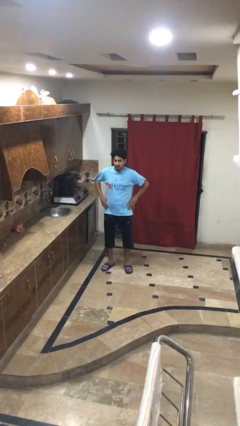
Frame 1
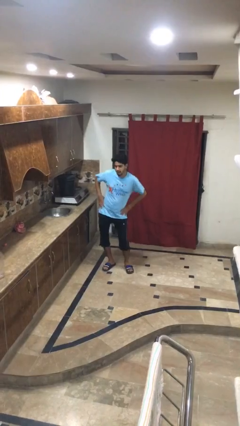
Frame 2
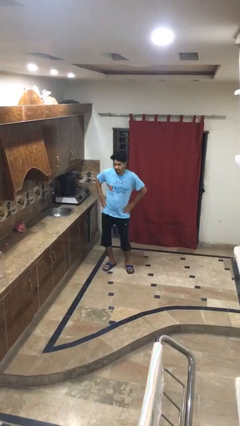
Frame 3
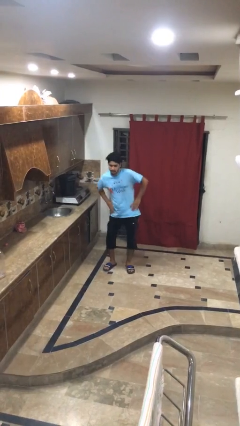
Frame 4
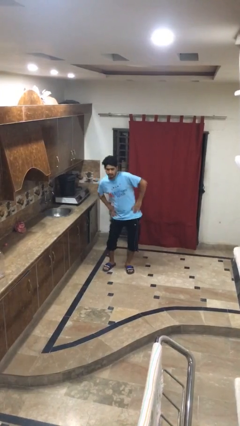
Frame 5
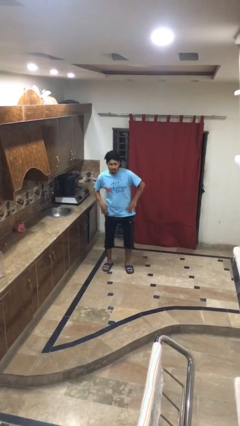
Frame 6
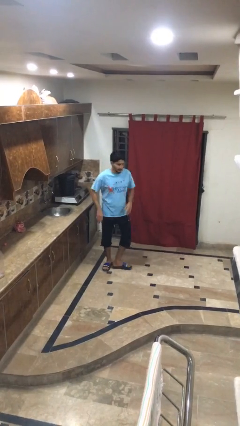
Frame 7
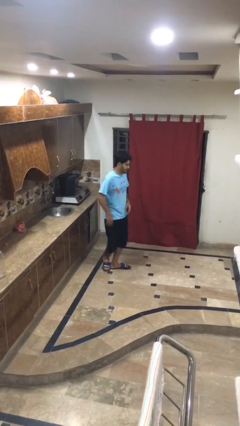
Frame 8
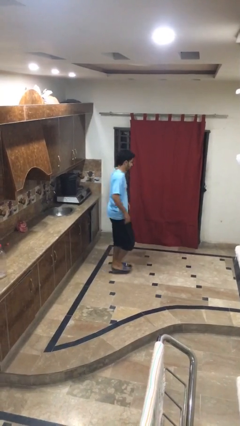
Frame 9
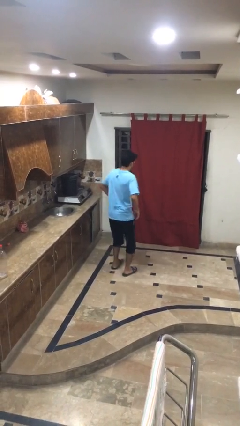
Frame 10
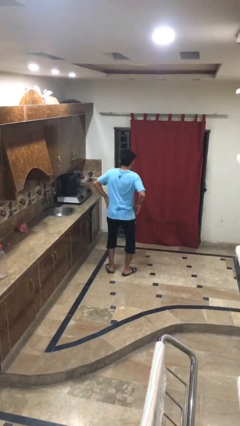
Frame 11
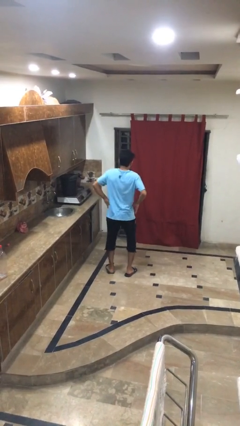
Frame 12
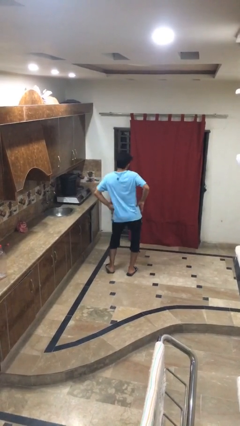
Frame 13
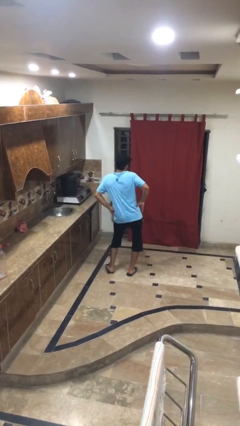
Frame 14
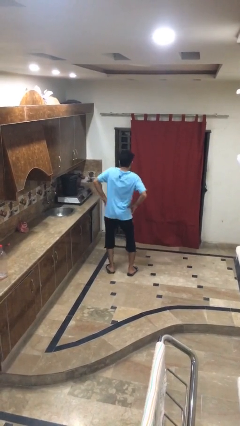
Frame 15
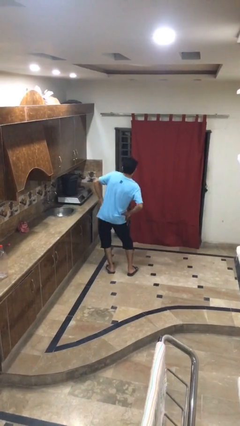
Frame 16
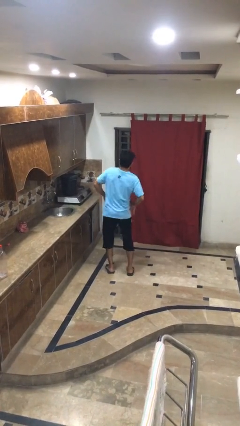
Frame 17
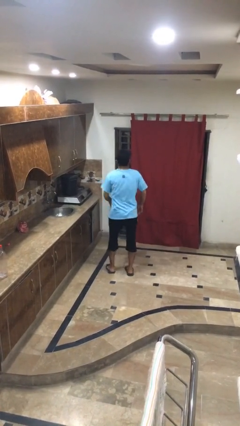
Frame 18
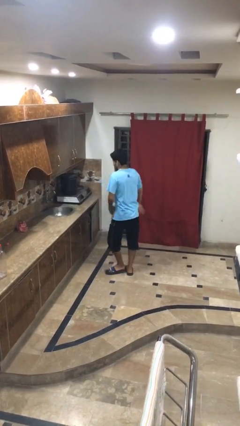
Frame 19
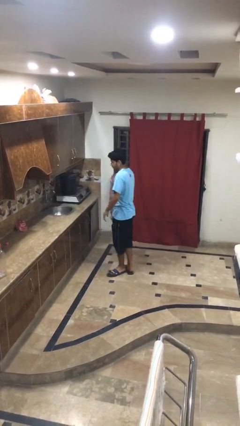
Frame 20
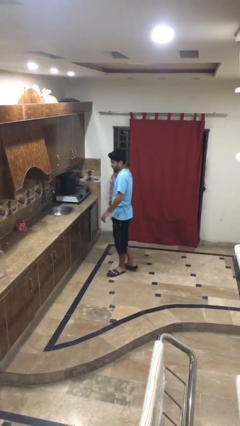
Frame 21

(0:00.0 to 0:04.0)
person wiggles hips

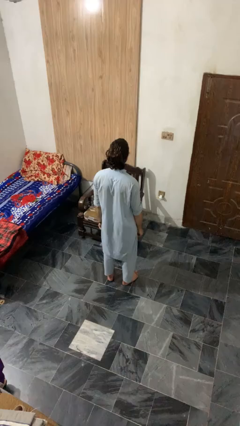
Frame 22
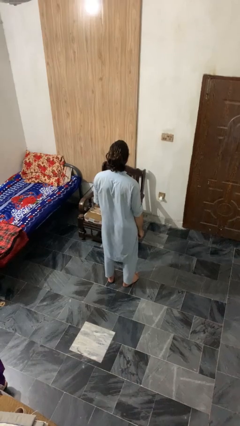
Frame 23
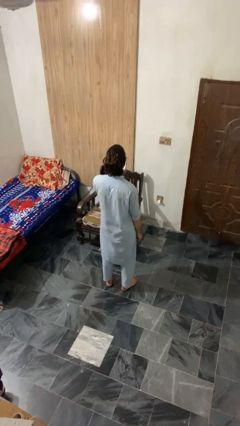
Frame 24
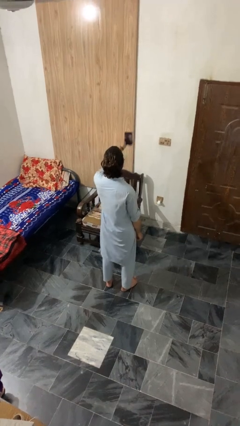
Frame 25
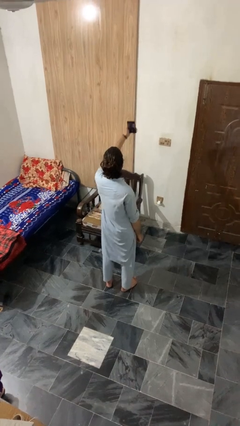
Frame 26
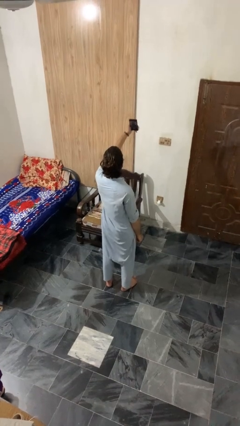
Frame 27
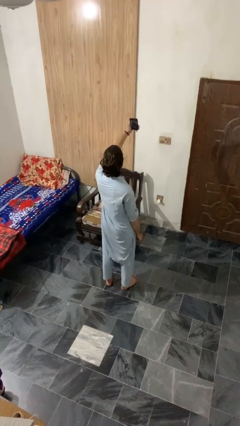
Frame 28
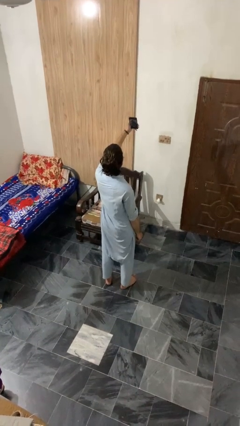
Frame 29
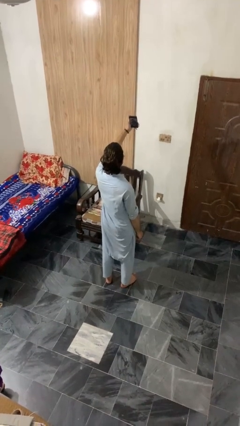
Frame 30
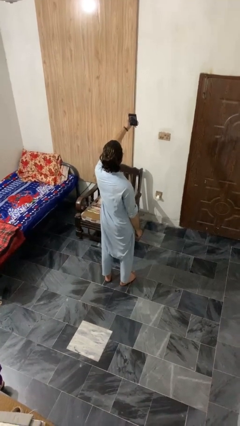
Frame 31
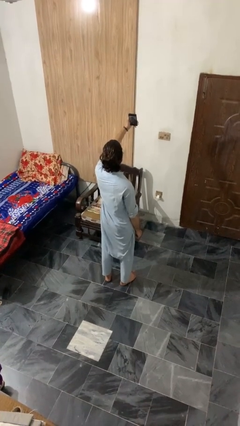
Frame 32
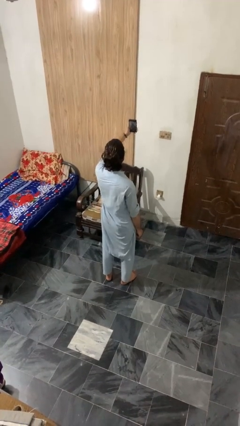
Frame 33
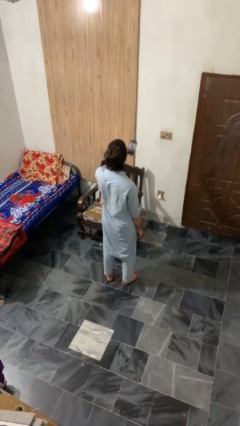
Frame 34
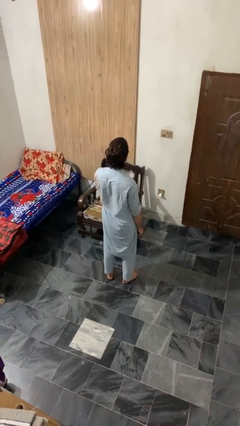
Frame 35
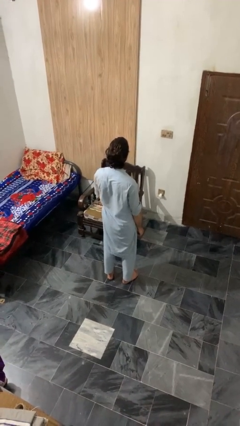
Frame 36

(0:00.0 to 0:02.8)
person takes selfie

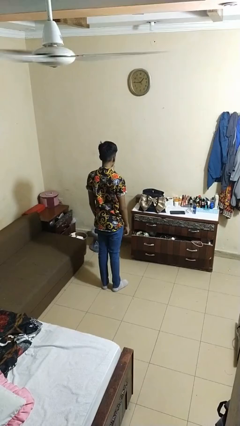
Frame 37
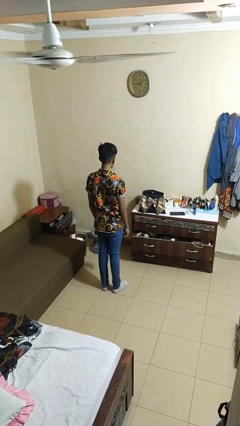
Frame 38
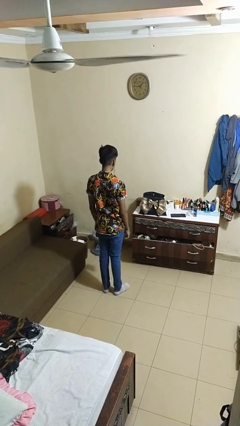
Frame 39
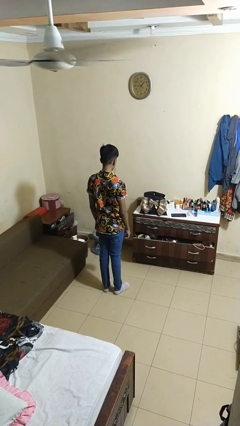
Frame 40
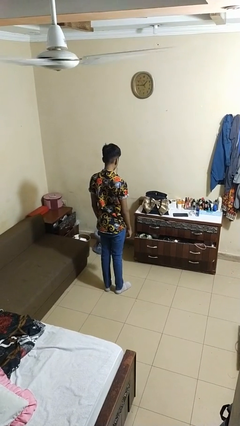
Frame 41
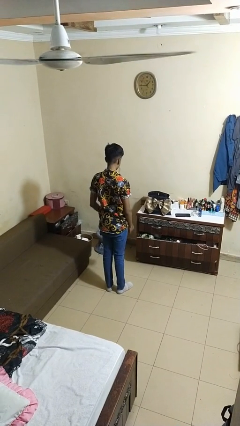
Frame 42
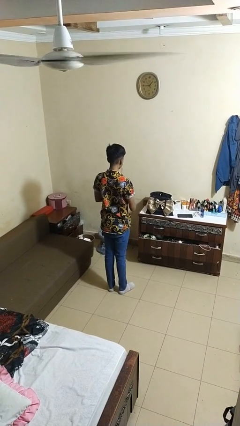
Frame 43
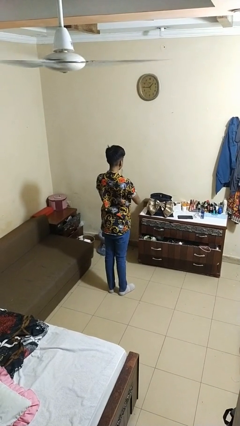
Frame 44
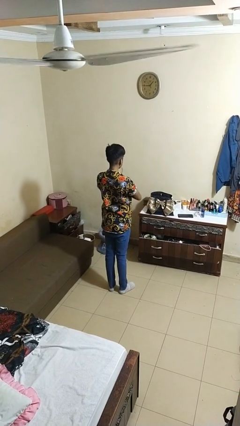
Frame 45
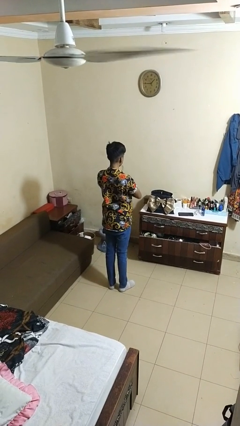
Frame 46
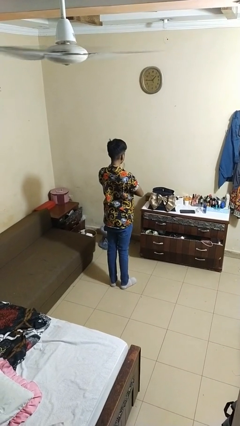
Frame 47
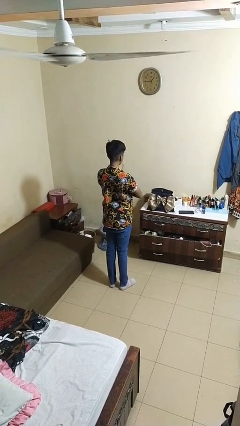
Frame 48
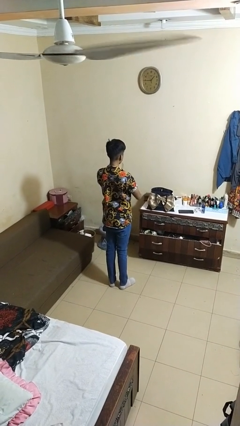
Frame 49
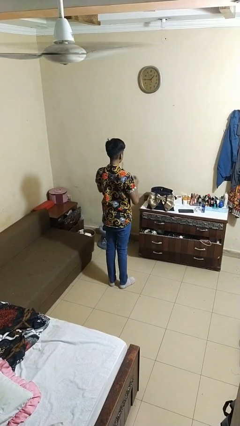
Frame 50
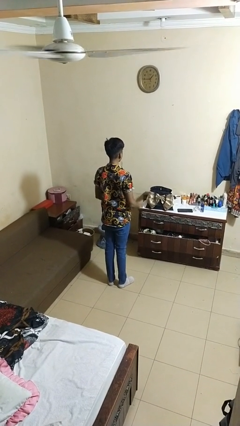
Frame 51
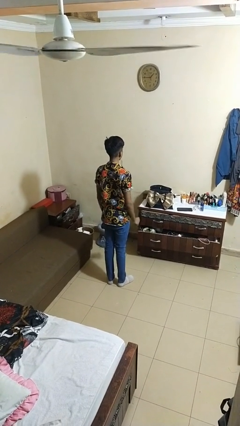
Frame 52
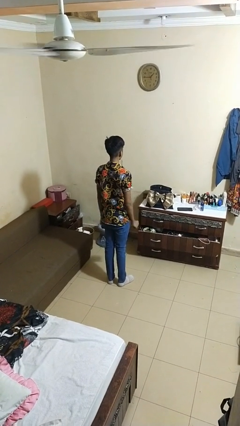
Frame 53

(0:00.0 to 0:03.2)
person crosses arms

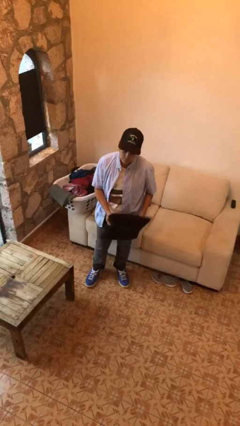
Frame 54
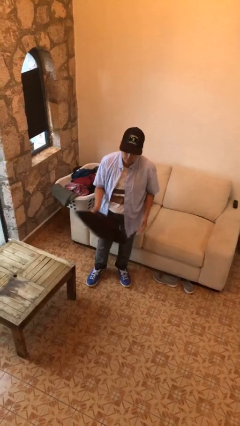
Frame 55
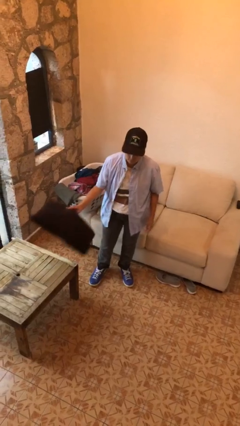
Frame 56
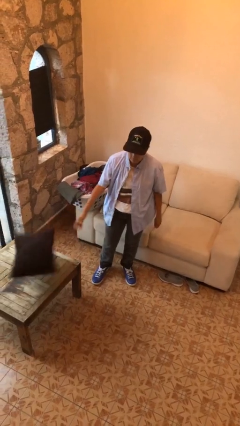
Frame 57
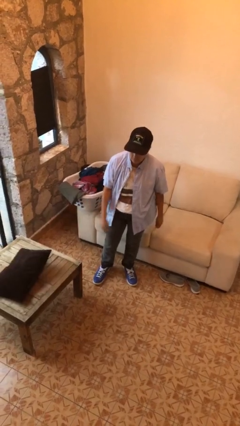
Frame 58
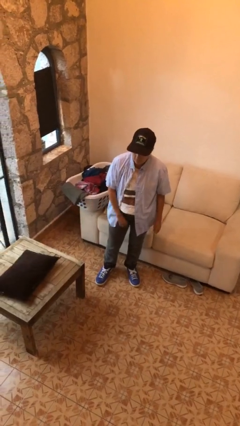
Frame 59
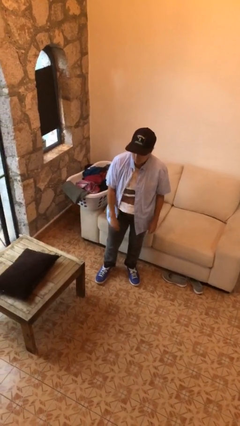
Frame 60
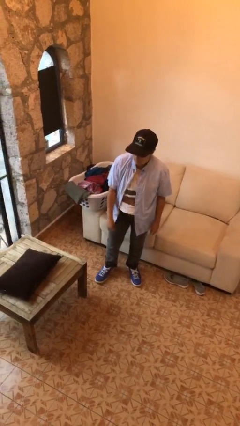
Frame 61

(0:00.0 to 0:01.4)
person throws object on table

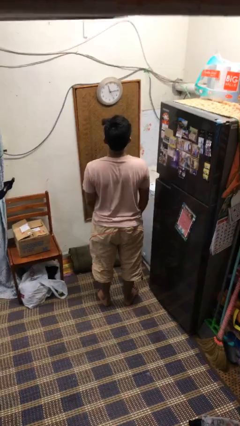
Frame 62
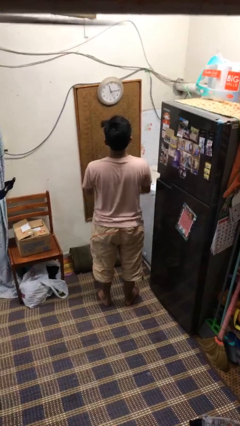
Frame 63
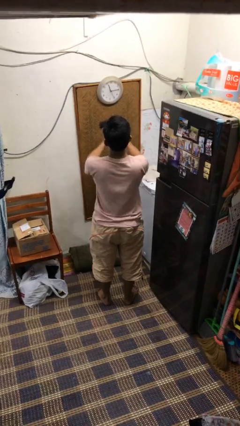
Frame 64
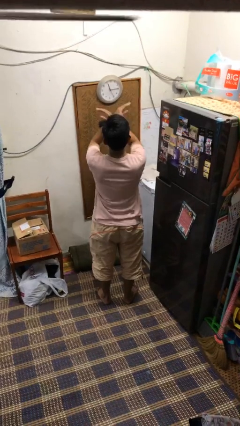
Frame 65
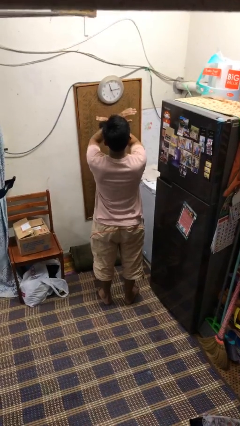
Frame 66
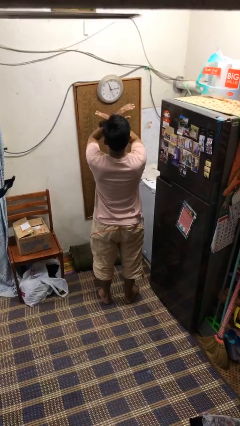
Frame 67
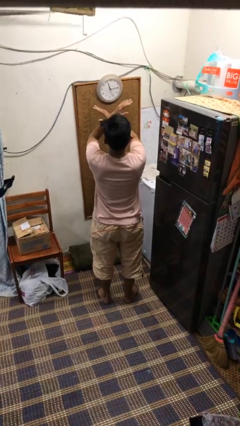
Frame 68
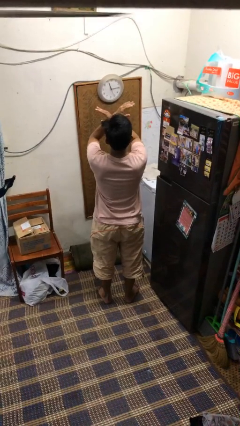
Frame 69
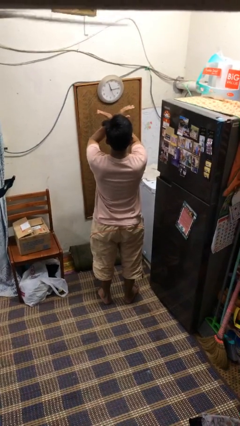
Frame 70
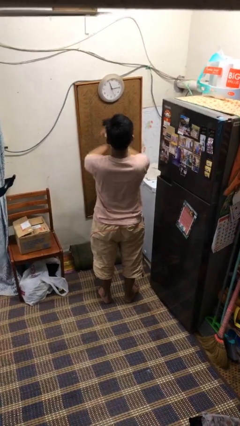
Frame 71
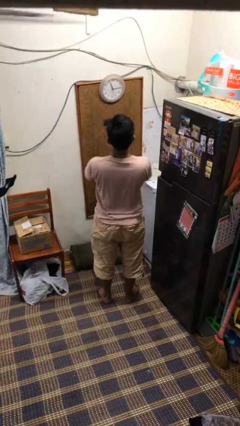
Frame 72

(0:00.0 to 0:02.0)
person gestures arms x

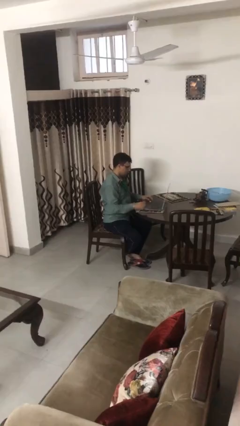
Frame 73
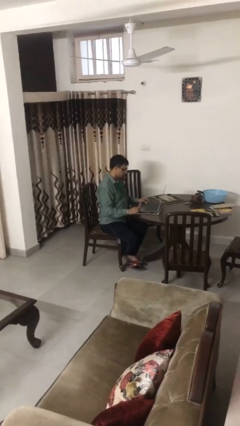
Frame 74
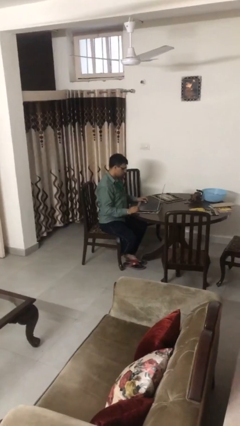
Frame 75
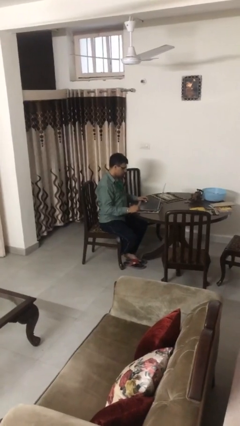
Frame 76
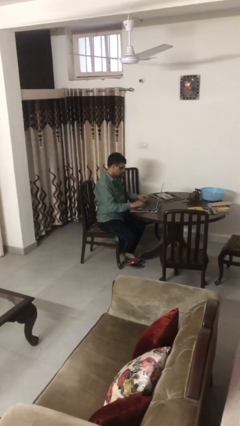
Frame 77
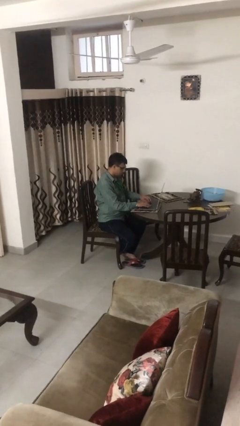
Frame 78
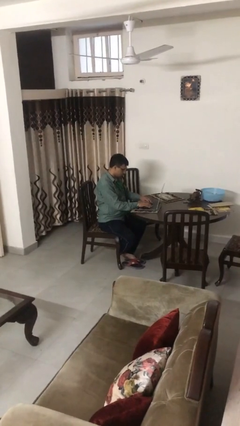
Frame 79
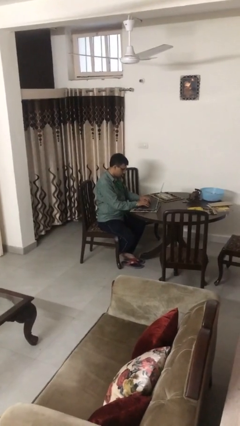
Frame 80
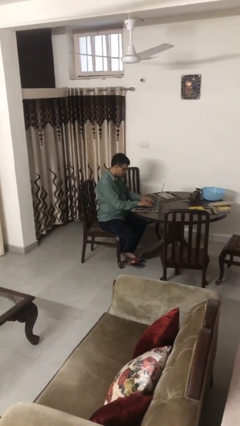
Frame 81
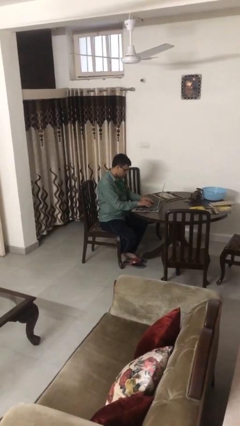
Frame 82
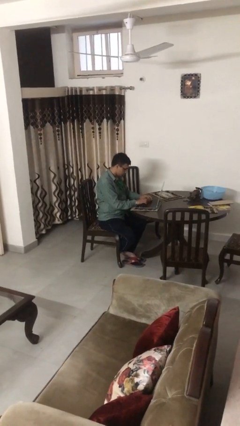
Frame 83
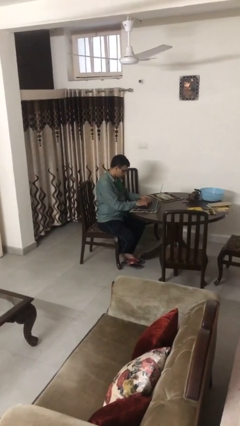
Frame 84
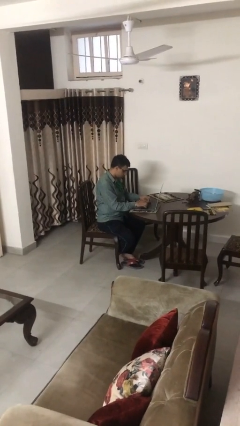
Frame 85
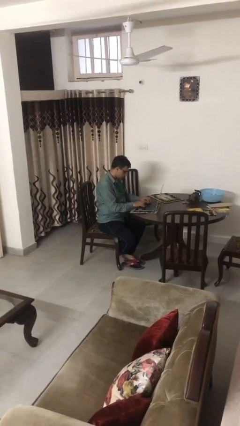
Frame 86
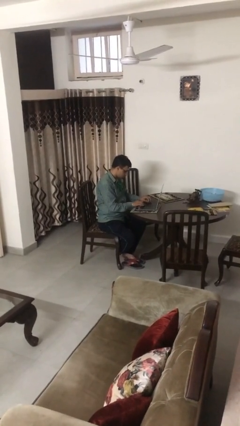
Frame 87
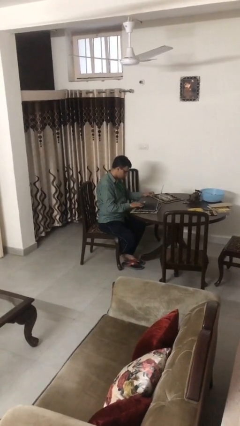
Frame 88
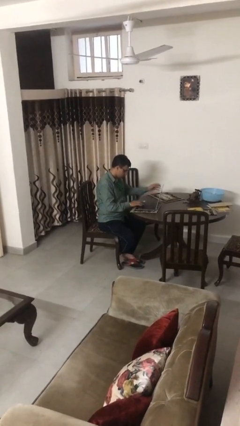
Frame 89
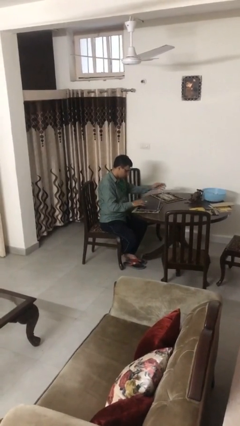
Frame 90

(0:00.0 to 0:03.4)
person interacts with laptop

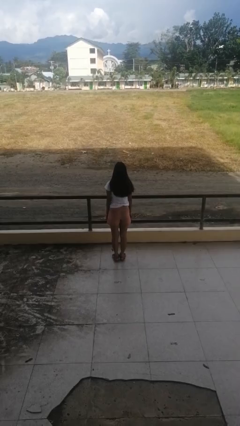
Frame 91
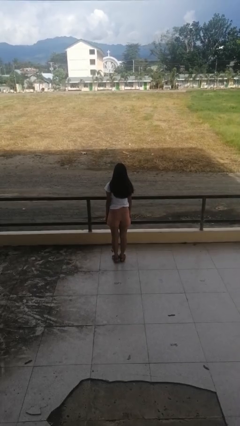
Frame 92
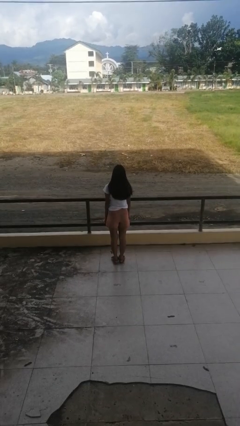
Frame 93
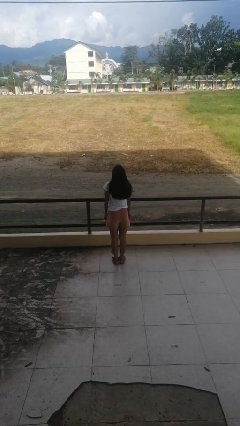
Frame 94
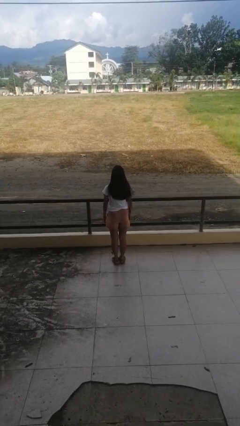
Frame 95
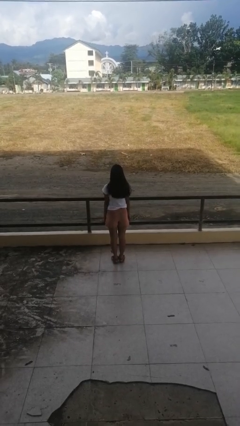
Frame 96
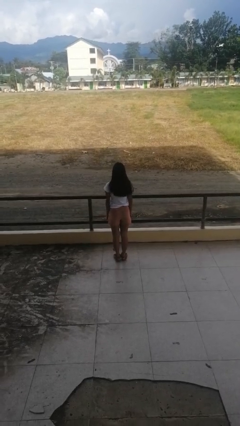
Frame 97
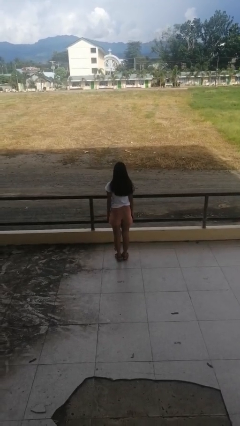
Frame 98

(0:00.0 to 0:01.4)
person shrugs
